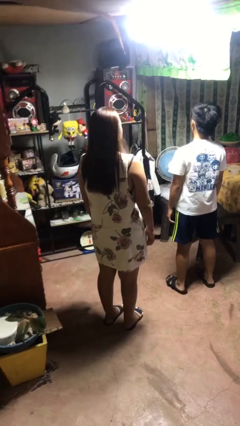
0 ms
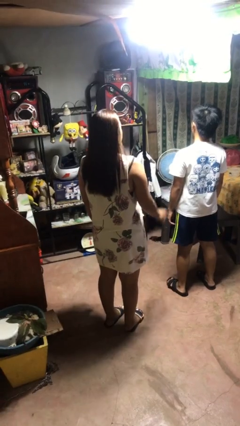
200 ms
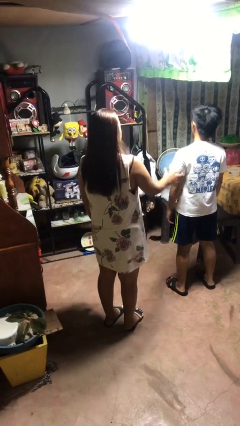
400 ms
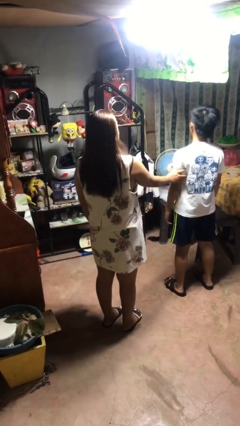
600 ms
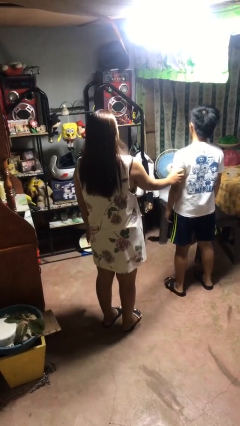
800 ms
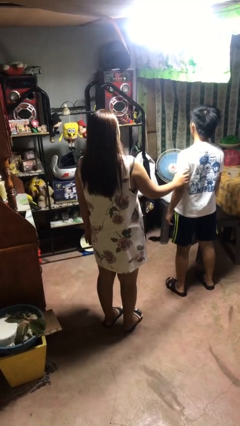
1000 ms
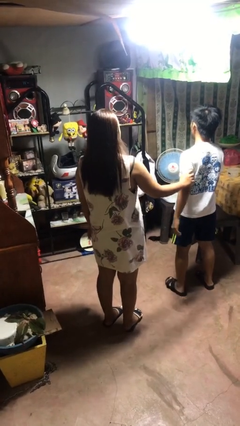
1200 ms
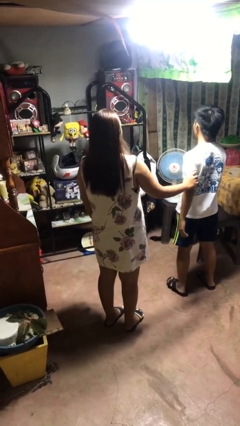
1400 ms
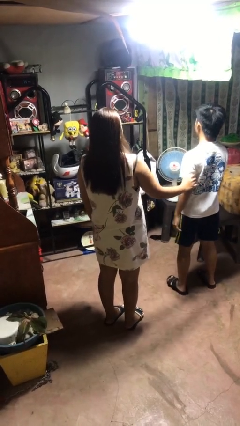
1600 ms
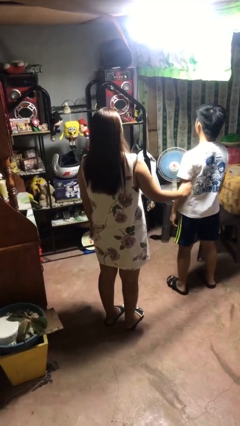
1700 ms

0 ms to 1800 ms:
person grabs person by bicep

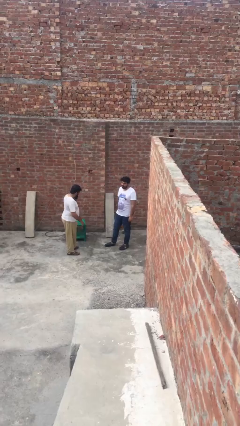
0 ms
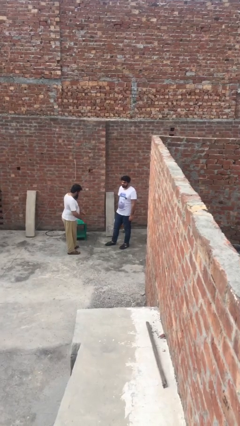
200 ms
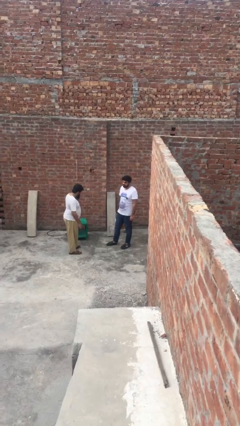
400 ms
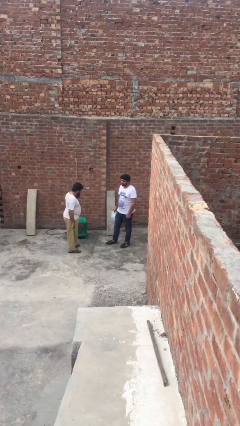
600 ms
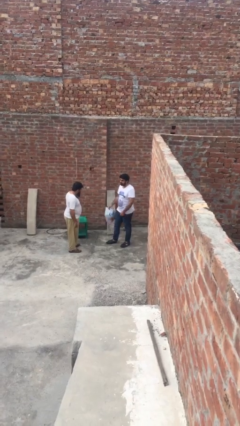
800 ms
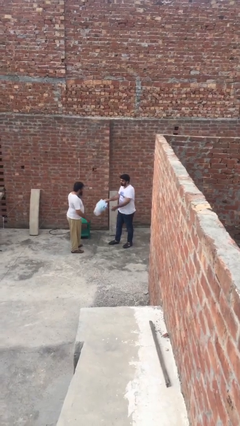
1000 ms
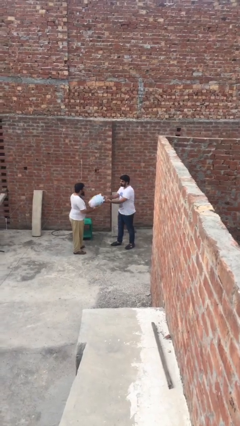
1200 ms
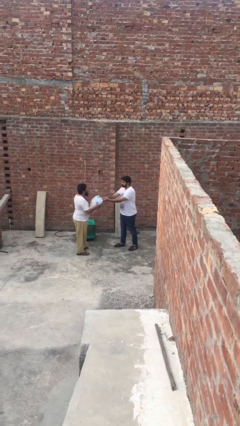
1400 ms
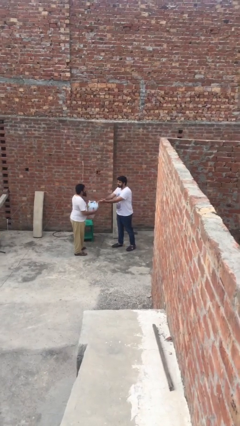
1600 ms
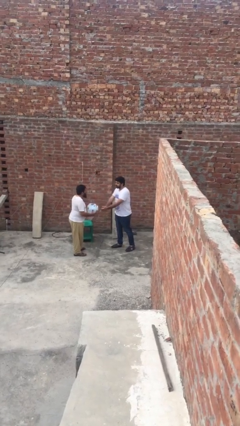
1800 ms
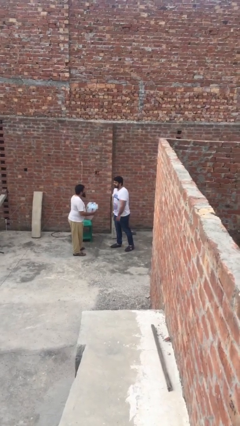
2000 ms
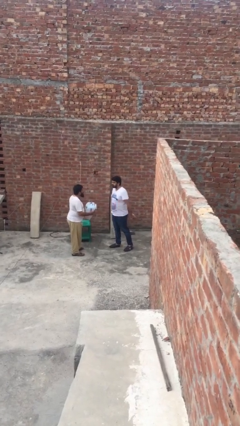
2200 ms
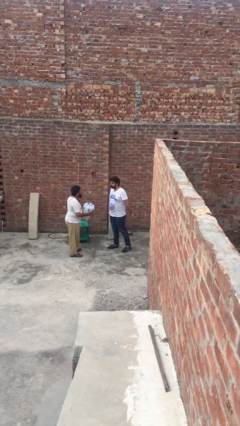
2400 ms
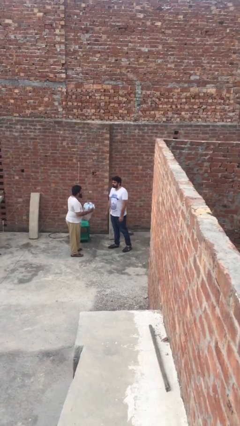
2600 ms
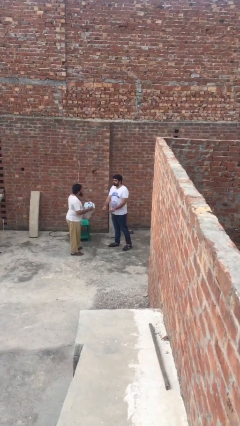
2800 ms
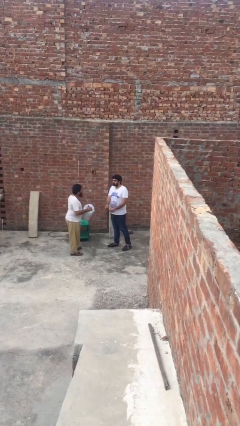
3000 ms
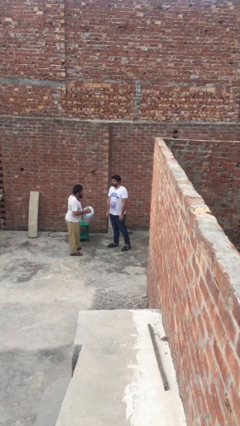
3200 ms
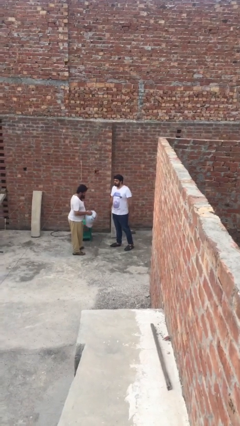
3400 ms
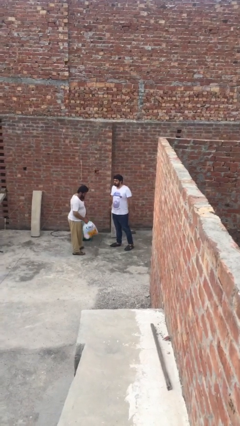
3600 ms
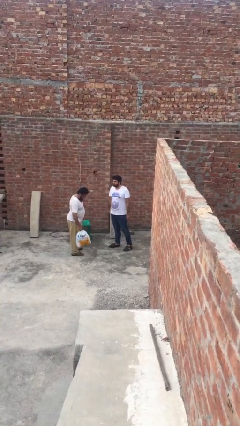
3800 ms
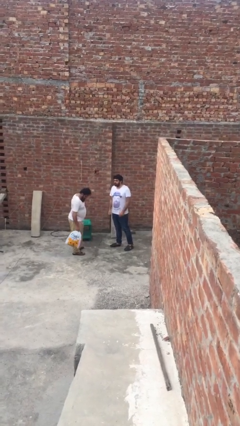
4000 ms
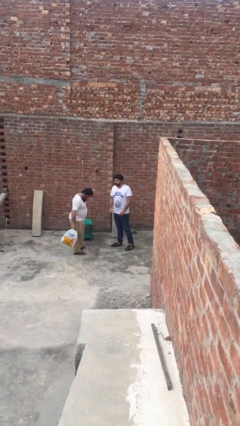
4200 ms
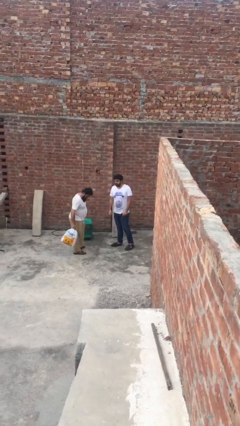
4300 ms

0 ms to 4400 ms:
person transfers object to person

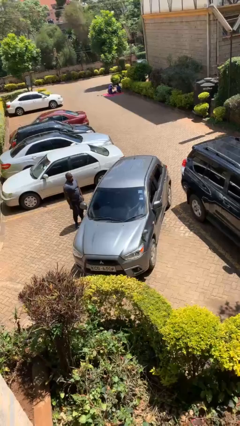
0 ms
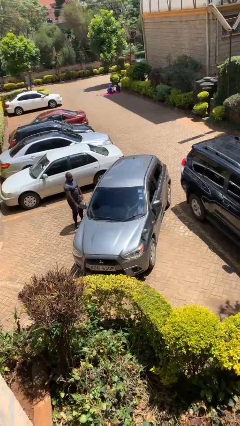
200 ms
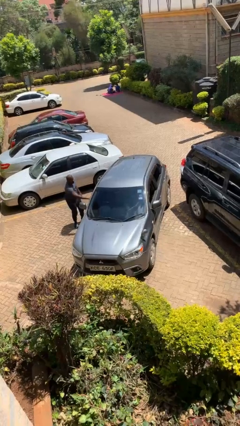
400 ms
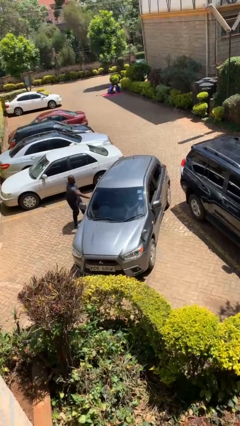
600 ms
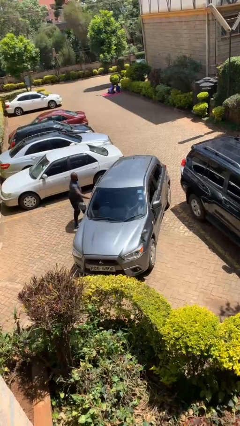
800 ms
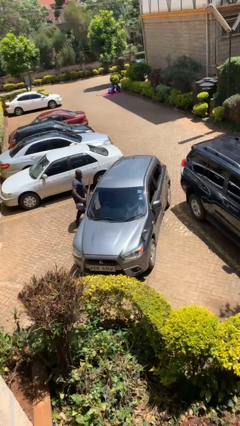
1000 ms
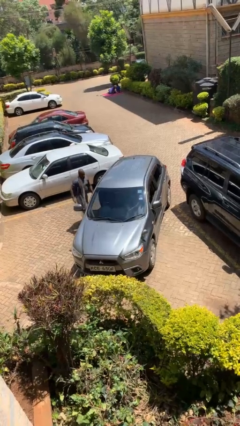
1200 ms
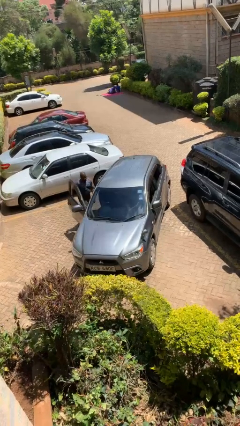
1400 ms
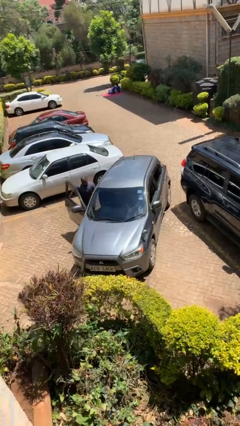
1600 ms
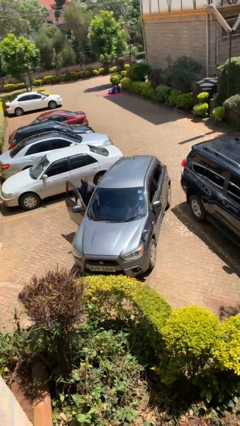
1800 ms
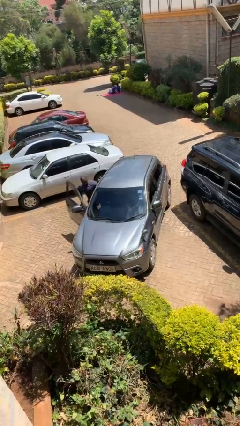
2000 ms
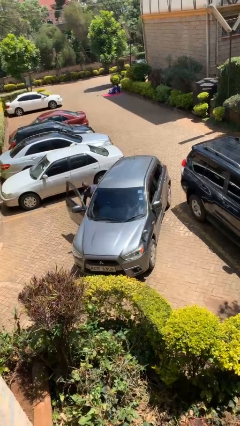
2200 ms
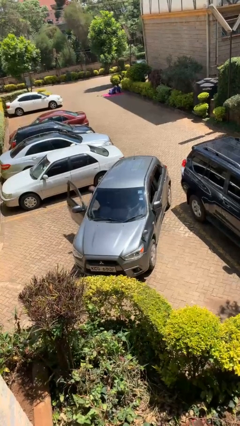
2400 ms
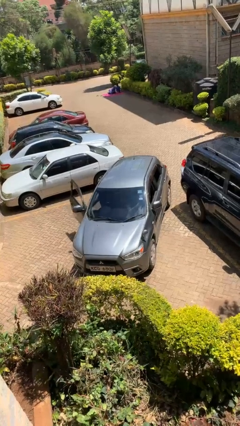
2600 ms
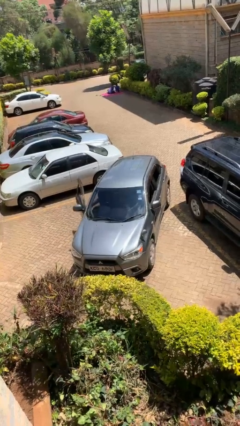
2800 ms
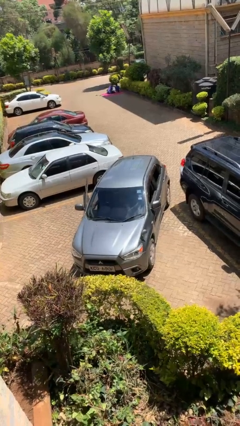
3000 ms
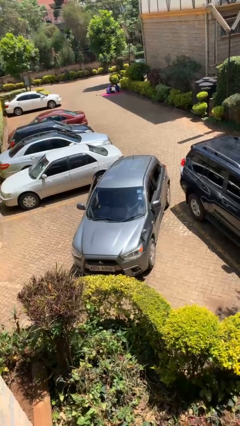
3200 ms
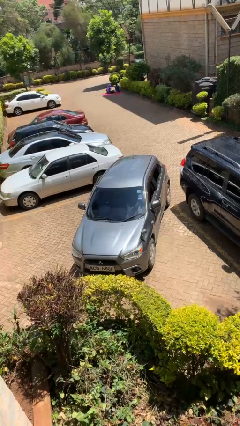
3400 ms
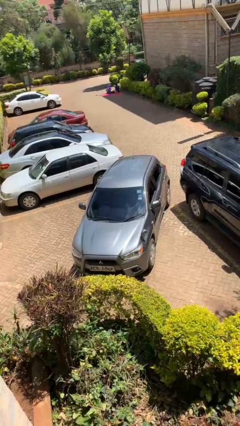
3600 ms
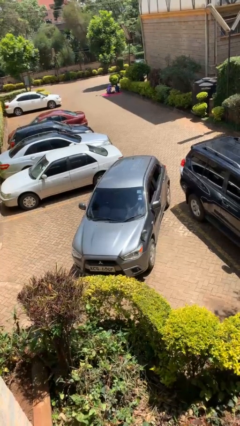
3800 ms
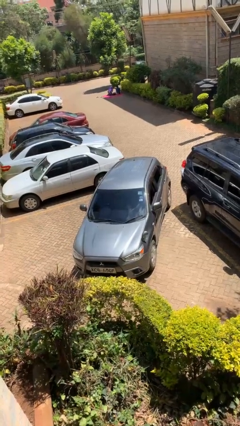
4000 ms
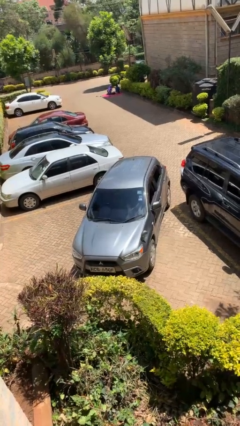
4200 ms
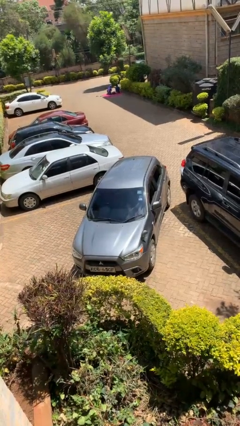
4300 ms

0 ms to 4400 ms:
car picks up person

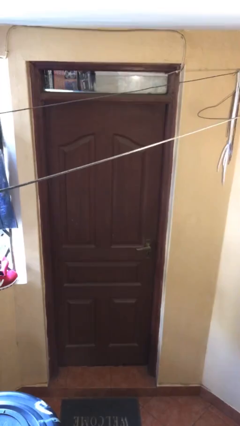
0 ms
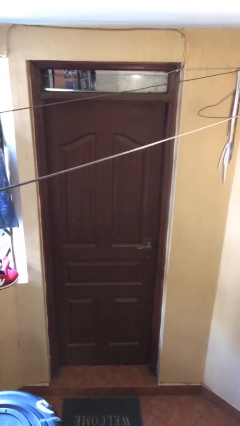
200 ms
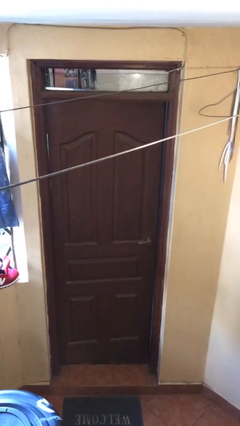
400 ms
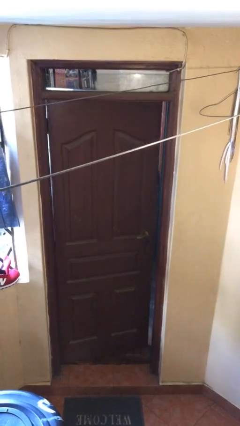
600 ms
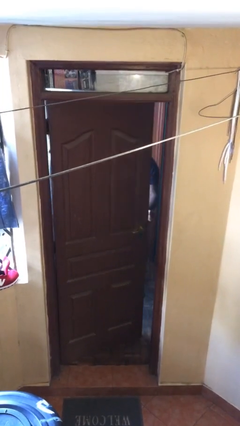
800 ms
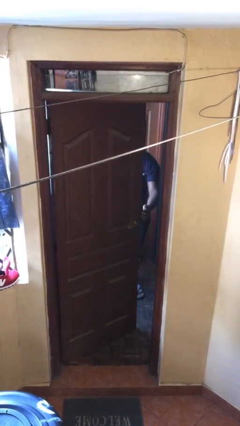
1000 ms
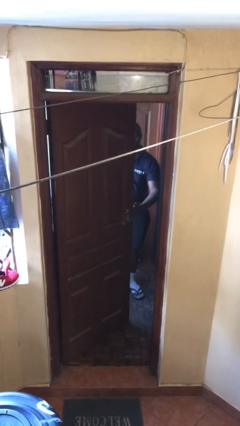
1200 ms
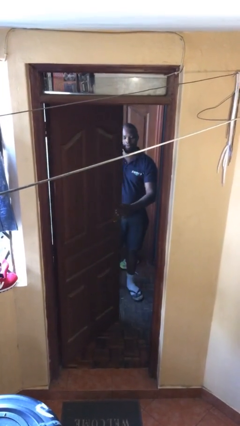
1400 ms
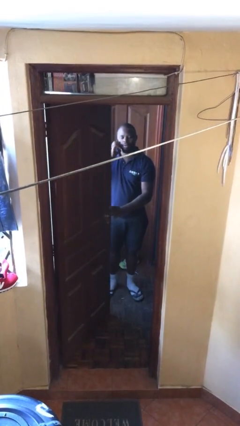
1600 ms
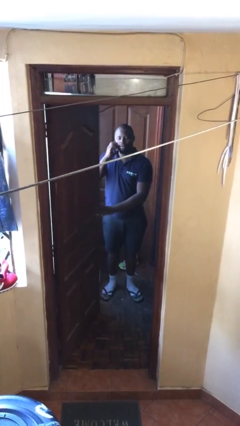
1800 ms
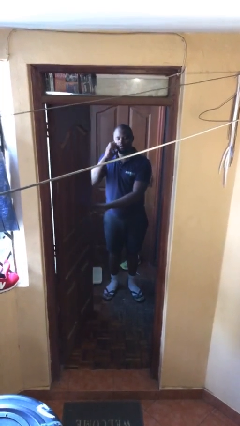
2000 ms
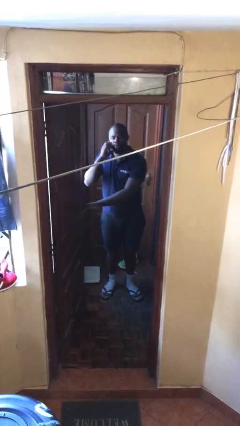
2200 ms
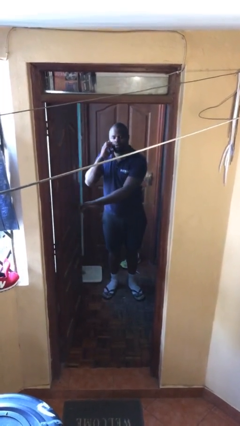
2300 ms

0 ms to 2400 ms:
person opens facility door

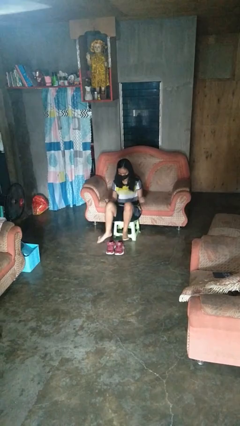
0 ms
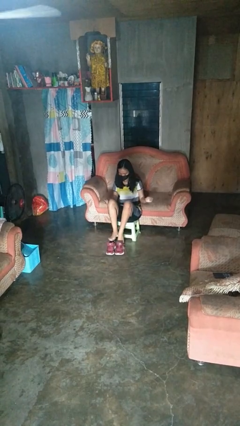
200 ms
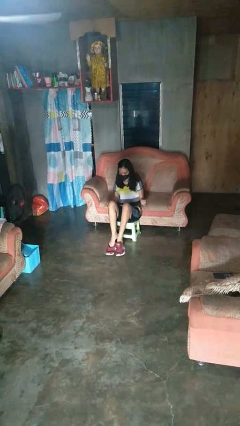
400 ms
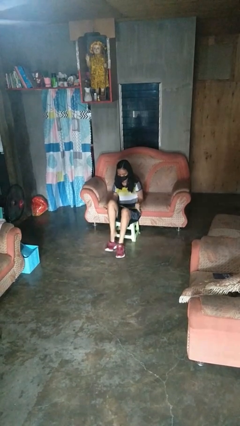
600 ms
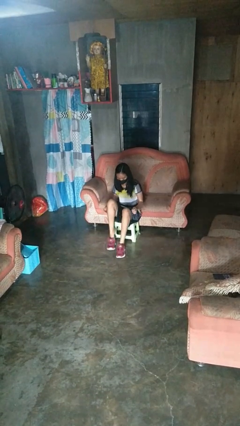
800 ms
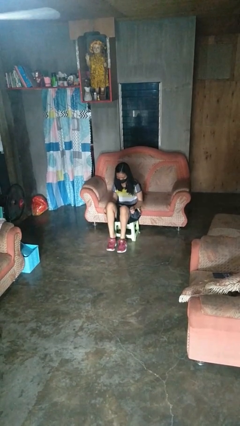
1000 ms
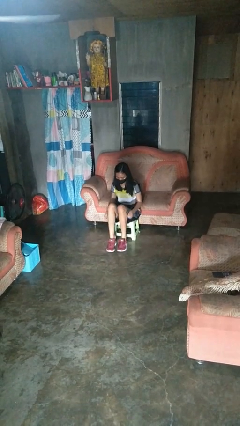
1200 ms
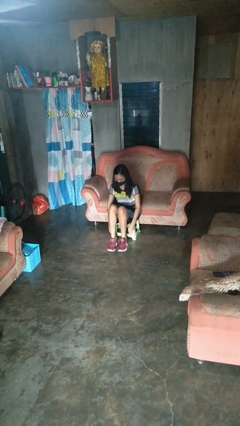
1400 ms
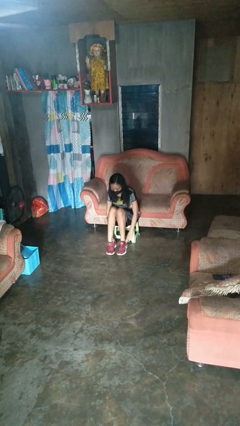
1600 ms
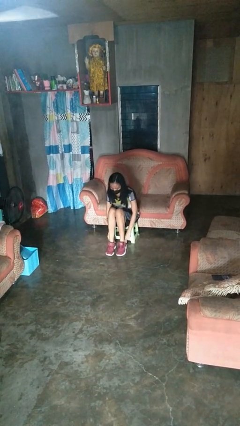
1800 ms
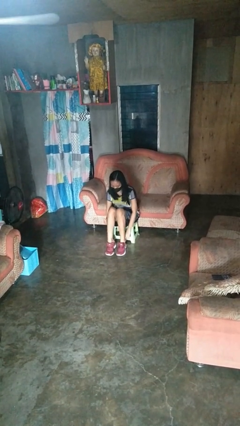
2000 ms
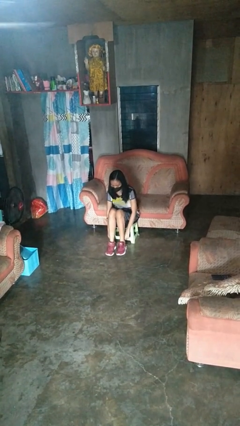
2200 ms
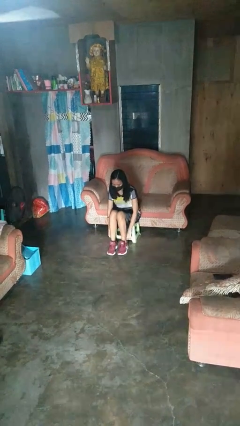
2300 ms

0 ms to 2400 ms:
person puts on shoes

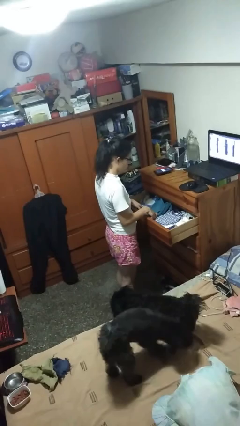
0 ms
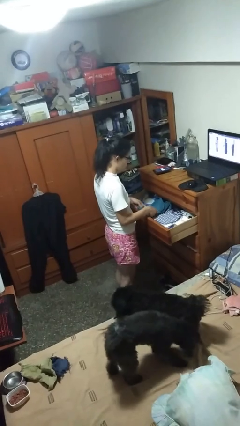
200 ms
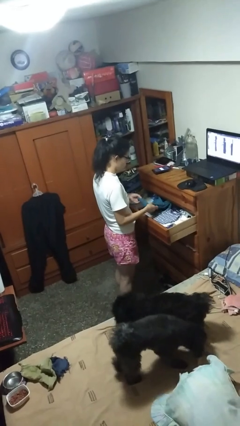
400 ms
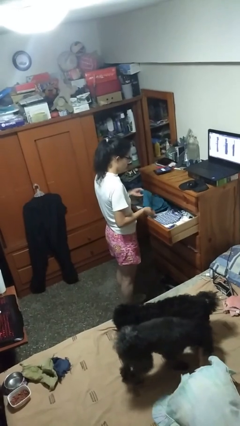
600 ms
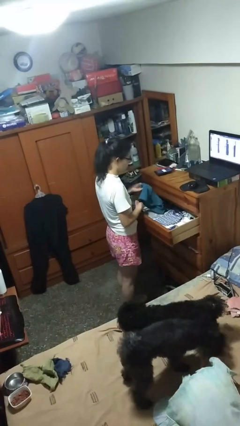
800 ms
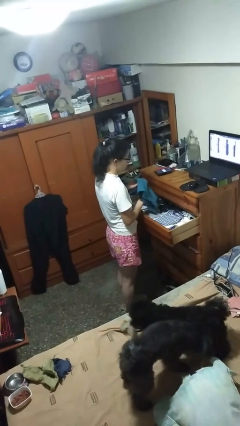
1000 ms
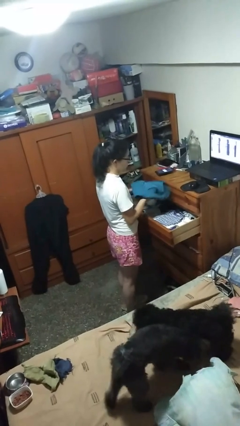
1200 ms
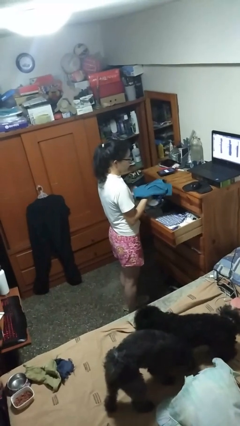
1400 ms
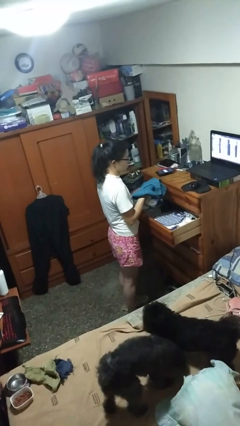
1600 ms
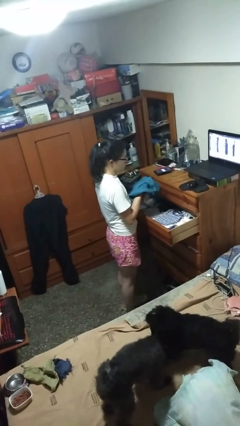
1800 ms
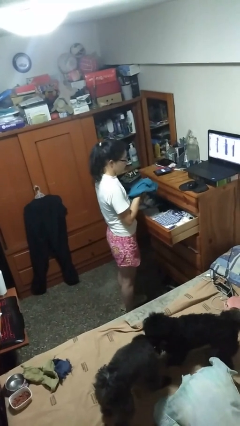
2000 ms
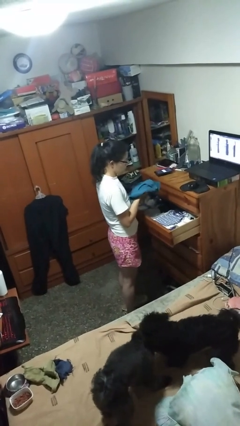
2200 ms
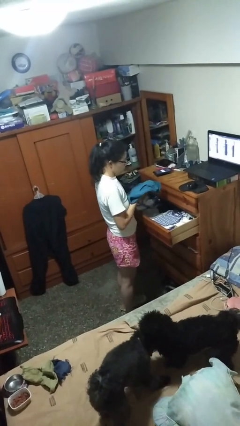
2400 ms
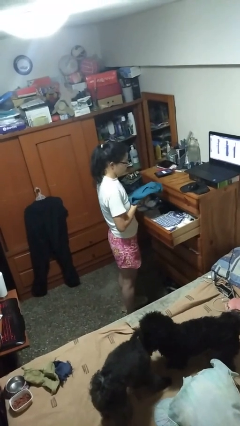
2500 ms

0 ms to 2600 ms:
person takes clothes from dresser
